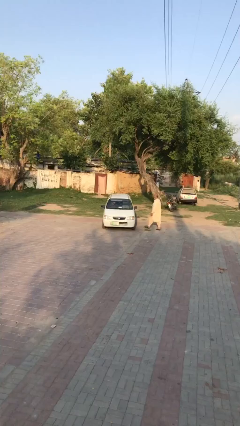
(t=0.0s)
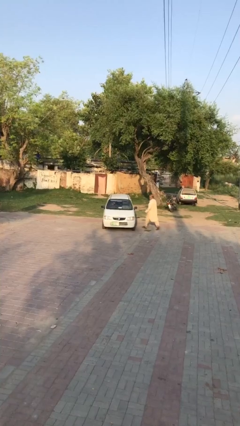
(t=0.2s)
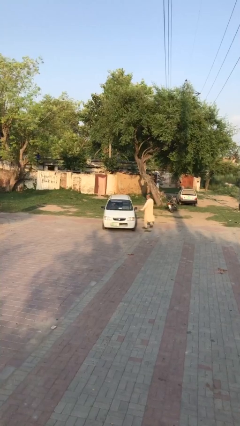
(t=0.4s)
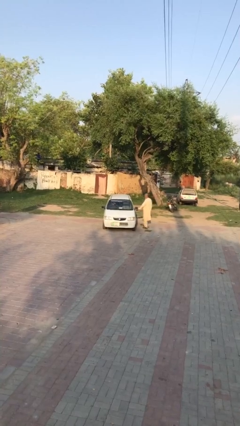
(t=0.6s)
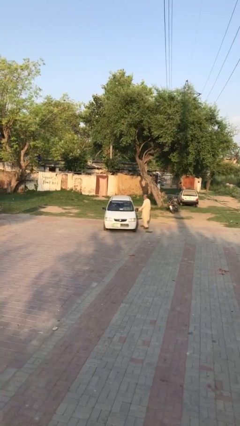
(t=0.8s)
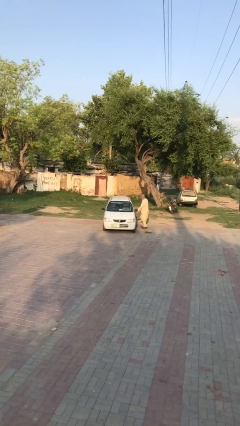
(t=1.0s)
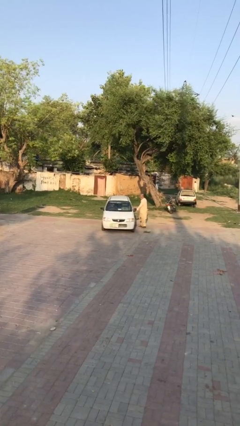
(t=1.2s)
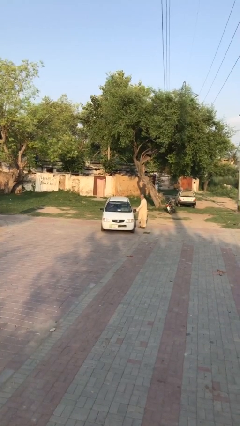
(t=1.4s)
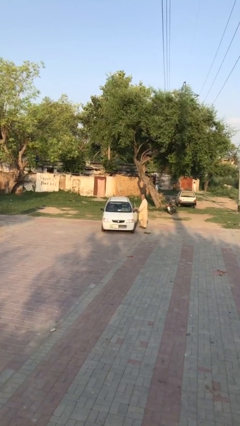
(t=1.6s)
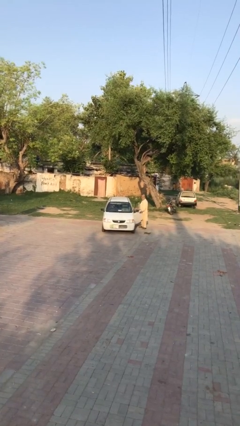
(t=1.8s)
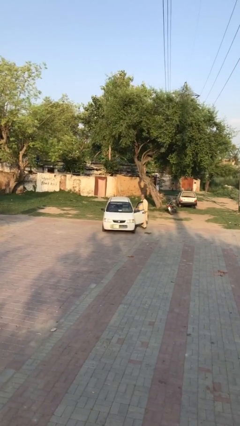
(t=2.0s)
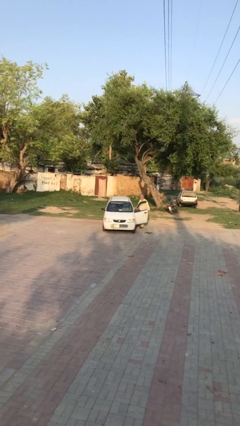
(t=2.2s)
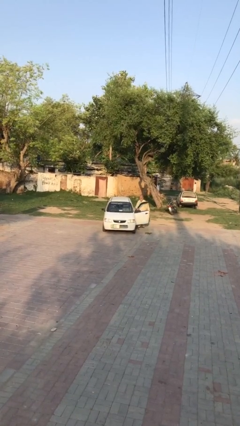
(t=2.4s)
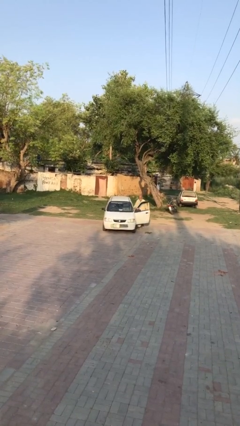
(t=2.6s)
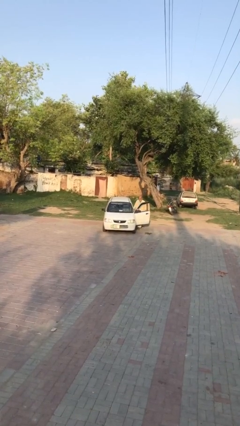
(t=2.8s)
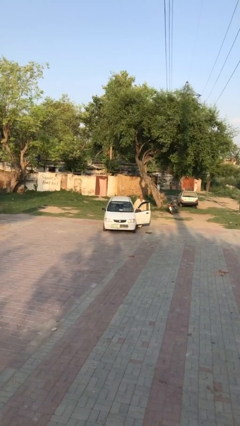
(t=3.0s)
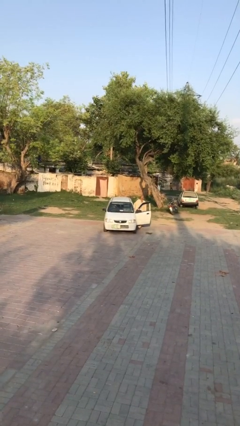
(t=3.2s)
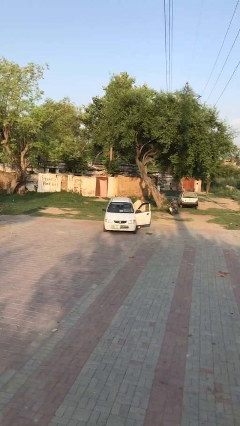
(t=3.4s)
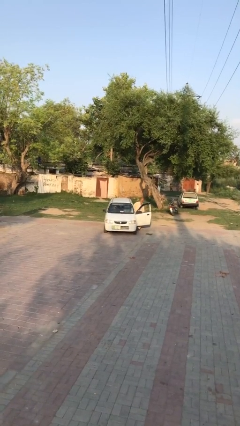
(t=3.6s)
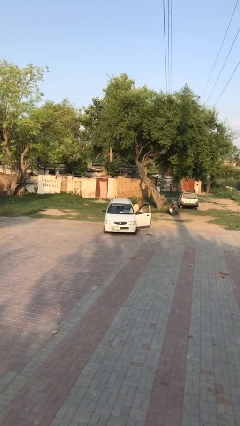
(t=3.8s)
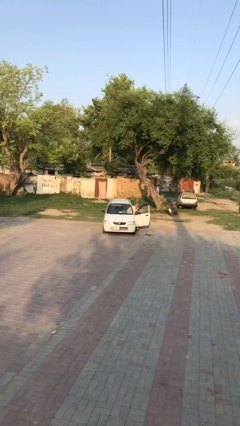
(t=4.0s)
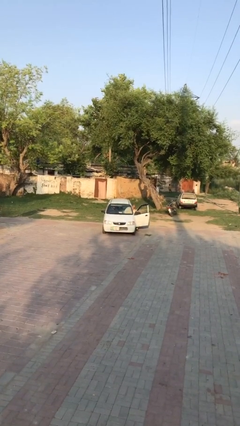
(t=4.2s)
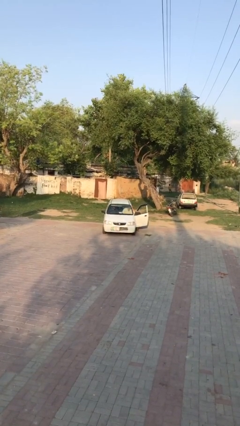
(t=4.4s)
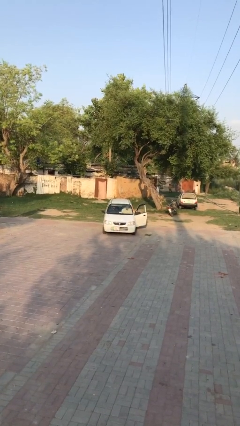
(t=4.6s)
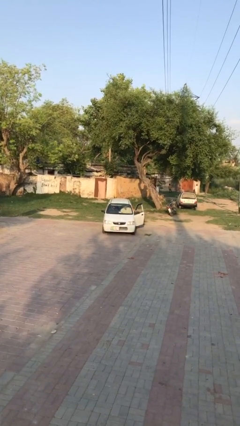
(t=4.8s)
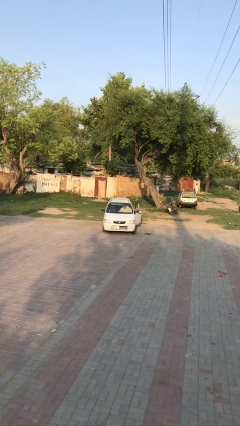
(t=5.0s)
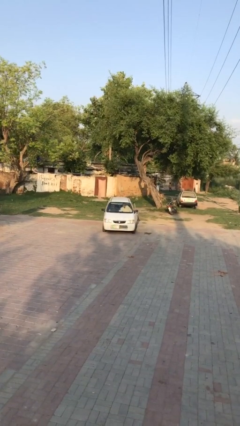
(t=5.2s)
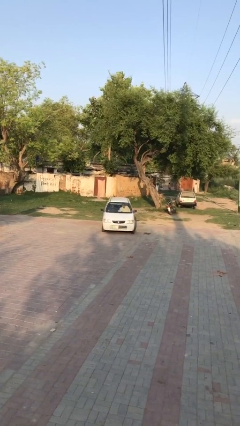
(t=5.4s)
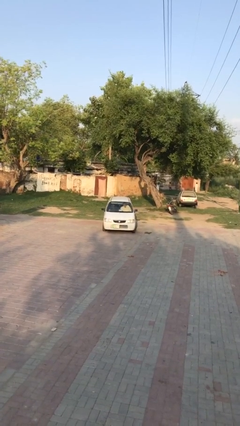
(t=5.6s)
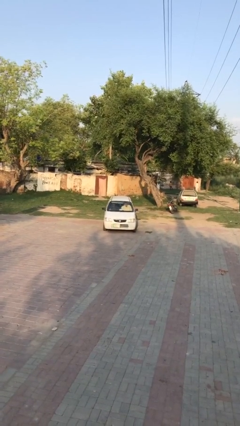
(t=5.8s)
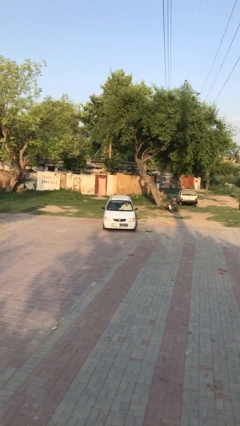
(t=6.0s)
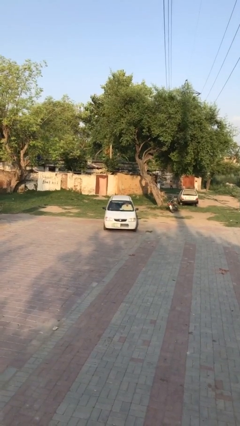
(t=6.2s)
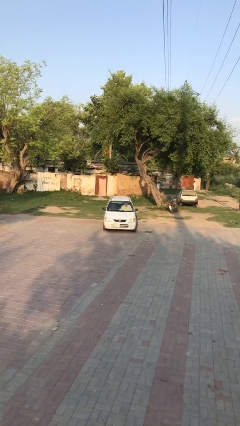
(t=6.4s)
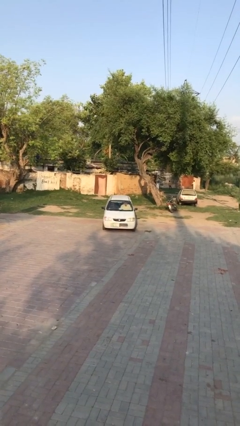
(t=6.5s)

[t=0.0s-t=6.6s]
car picks up person
